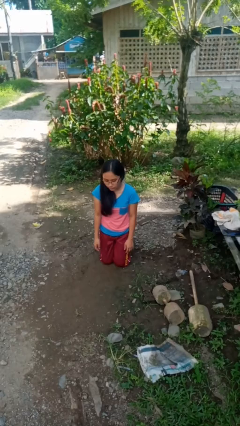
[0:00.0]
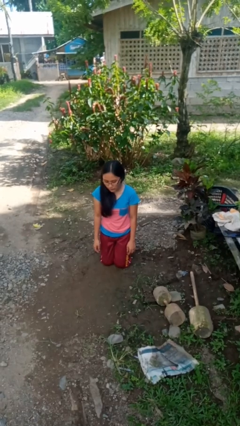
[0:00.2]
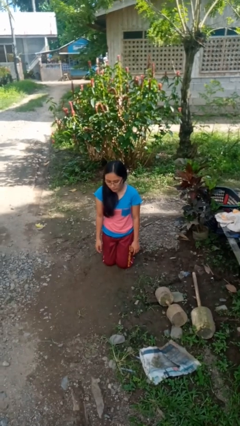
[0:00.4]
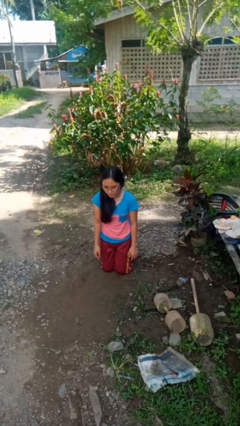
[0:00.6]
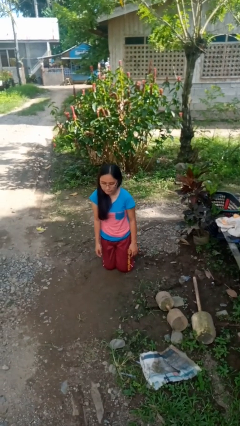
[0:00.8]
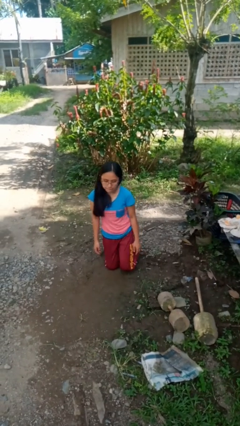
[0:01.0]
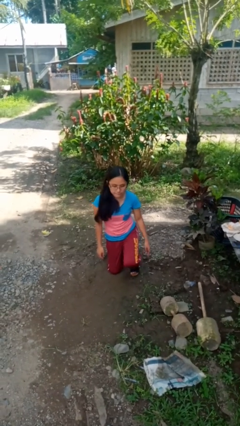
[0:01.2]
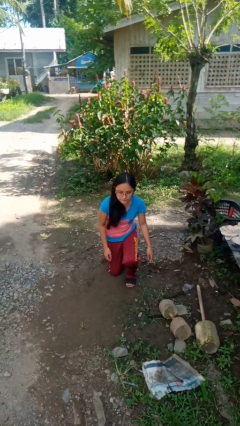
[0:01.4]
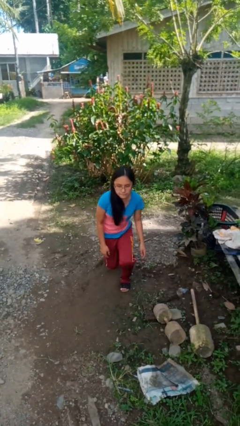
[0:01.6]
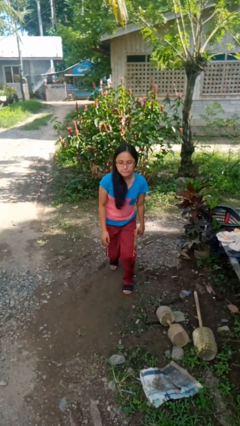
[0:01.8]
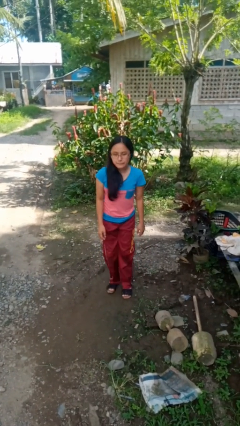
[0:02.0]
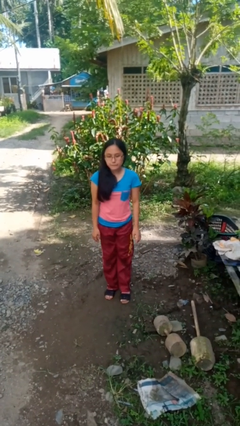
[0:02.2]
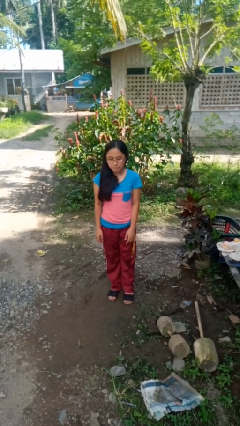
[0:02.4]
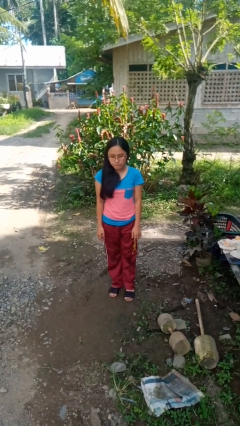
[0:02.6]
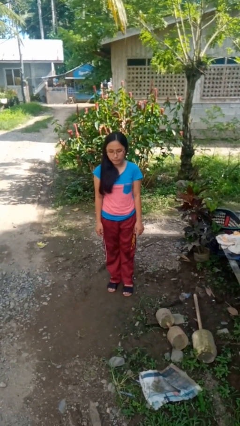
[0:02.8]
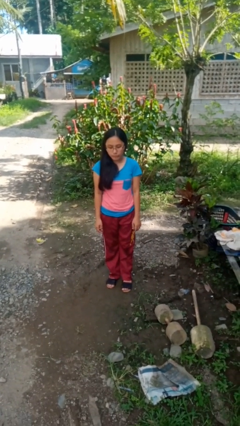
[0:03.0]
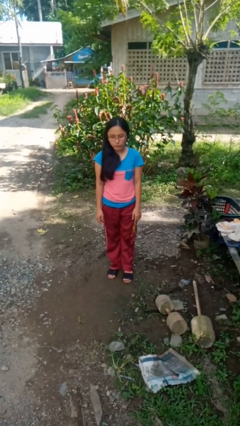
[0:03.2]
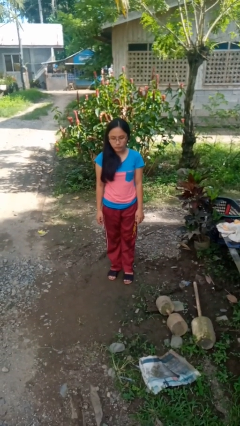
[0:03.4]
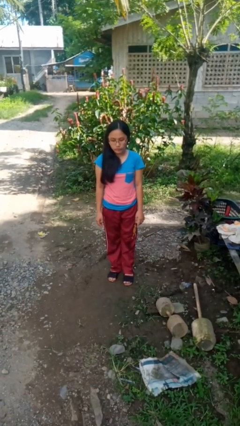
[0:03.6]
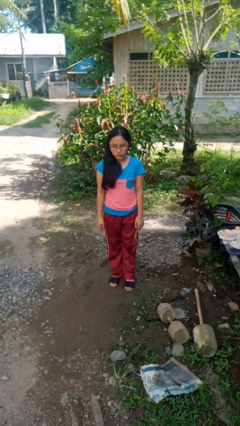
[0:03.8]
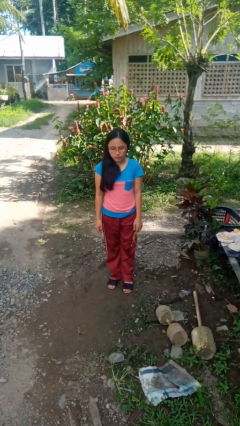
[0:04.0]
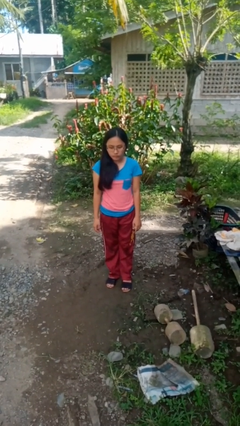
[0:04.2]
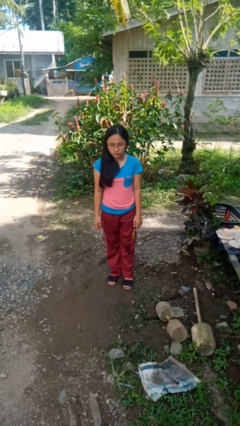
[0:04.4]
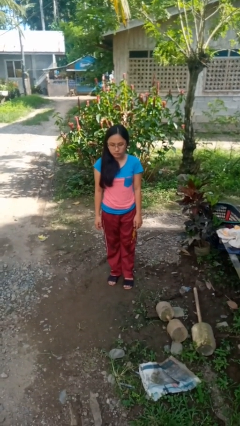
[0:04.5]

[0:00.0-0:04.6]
person stands up from floor

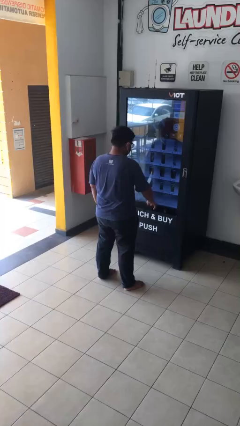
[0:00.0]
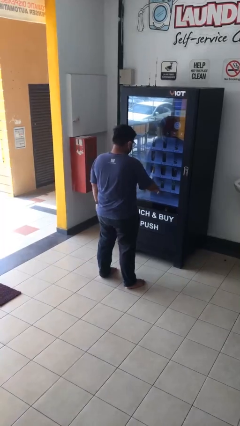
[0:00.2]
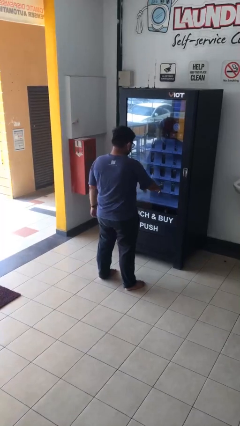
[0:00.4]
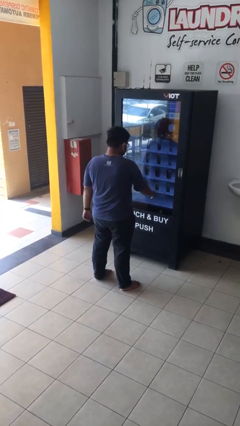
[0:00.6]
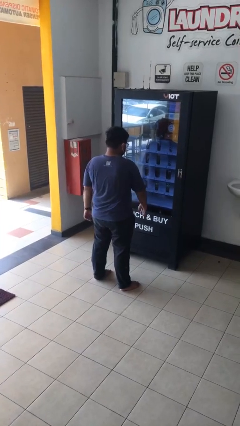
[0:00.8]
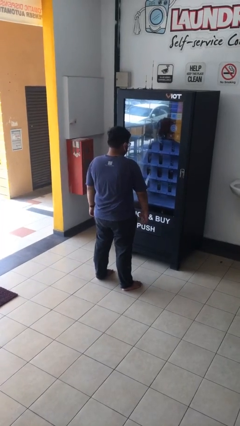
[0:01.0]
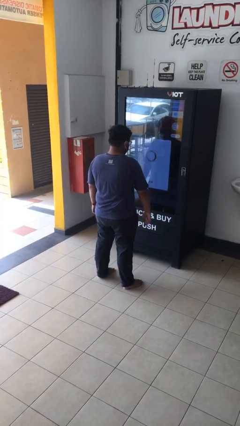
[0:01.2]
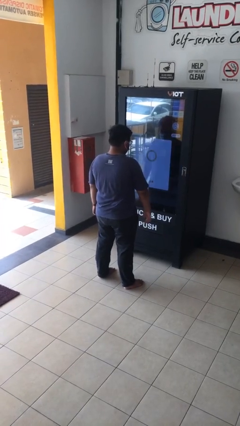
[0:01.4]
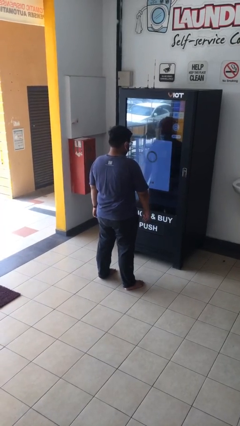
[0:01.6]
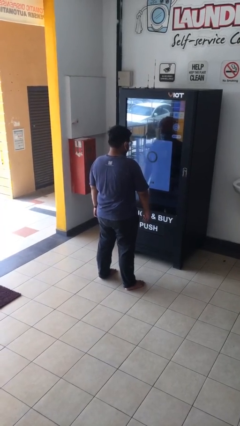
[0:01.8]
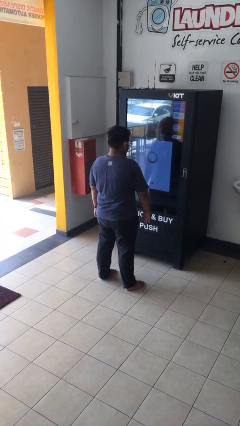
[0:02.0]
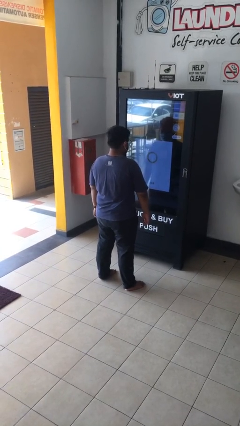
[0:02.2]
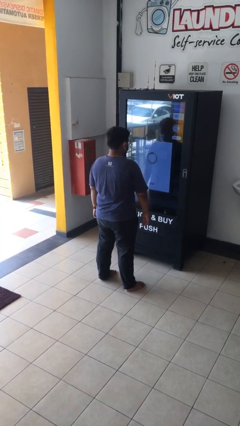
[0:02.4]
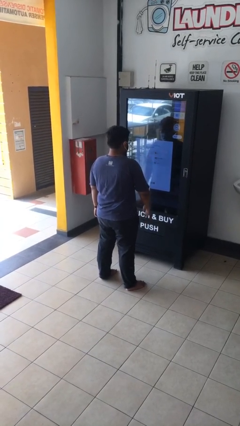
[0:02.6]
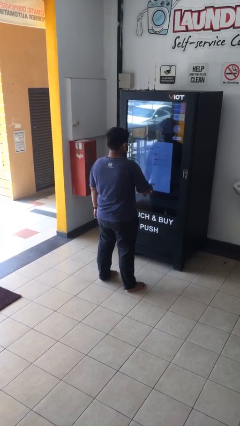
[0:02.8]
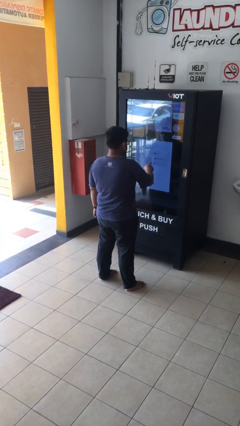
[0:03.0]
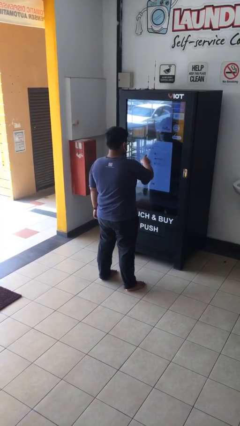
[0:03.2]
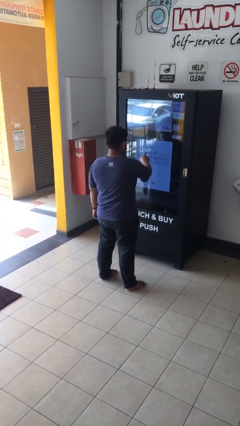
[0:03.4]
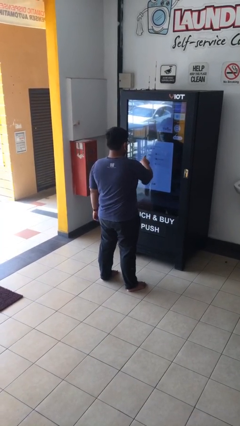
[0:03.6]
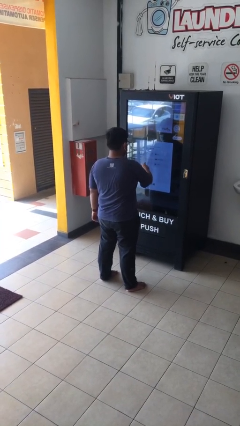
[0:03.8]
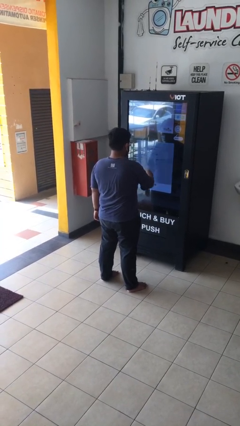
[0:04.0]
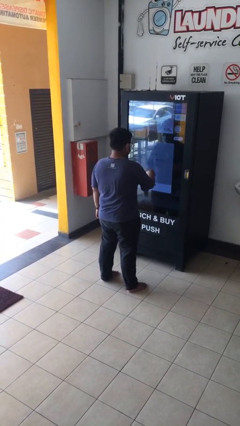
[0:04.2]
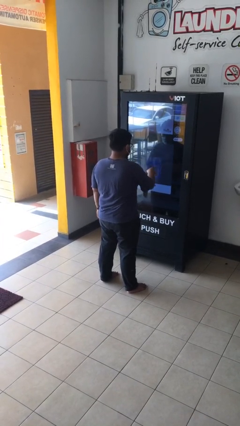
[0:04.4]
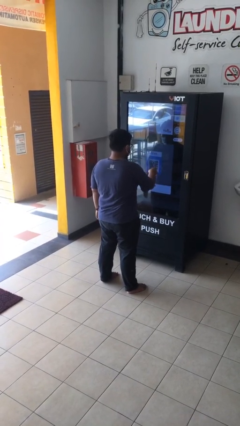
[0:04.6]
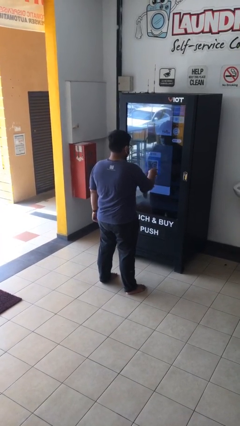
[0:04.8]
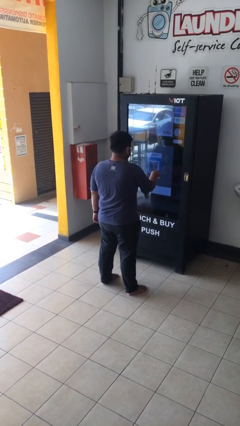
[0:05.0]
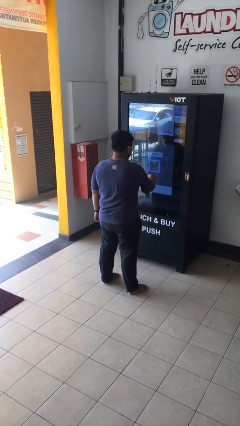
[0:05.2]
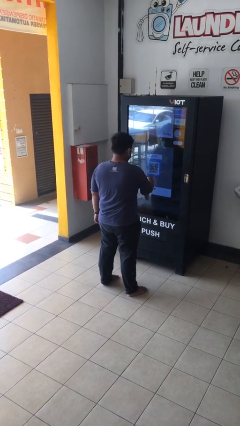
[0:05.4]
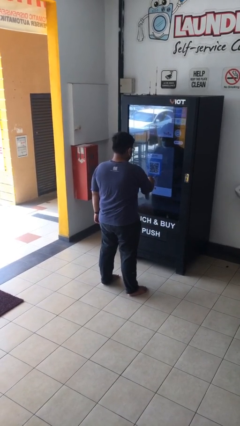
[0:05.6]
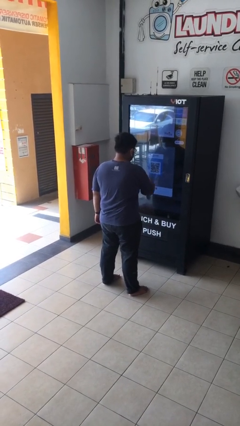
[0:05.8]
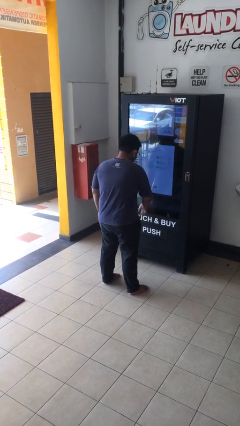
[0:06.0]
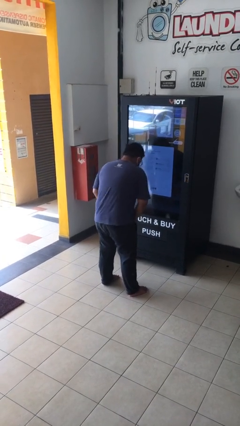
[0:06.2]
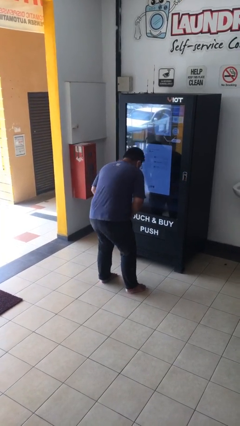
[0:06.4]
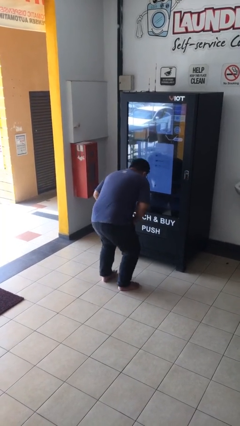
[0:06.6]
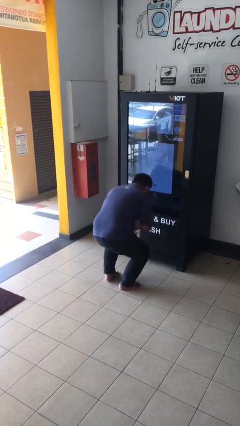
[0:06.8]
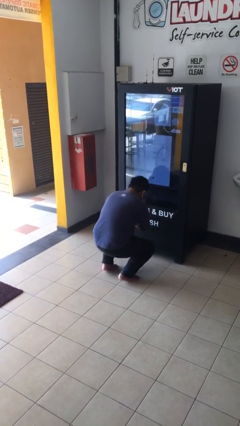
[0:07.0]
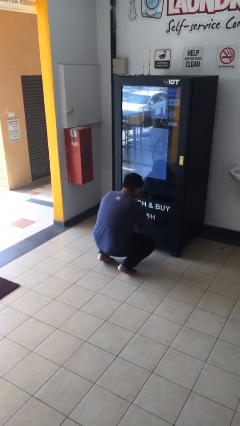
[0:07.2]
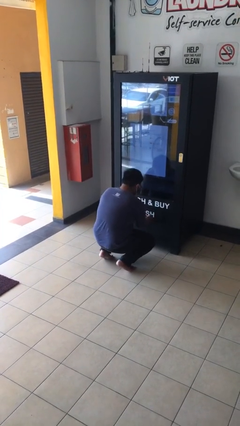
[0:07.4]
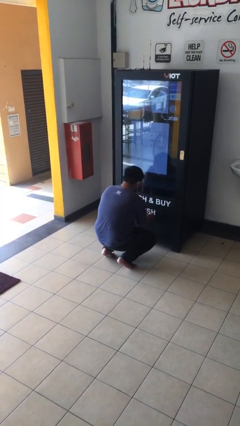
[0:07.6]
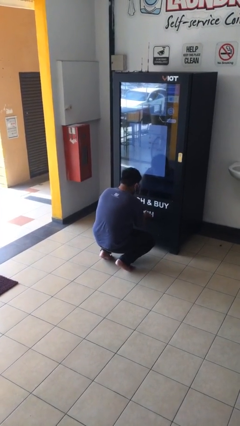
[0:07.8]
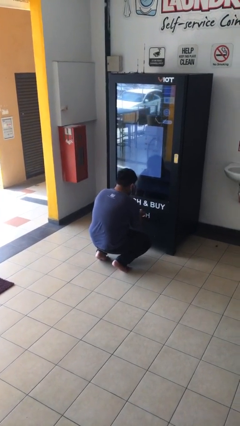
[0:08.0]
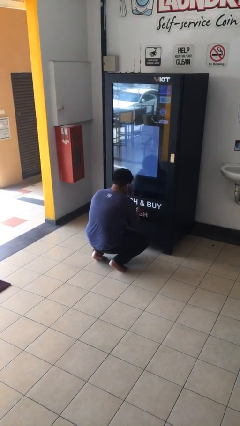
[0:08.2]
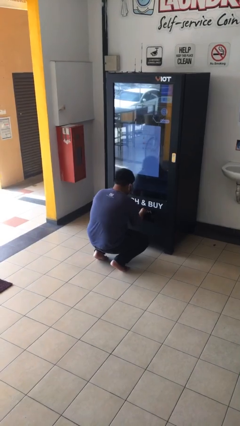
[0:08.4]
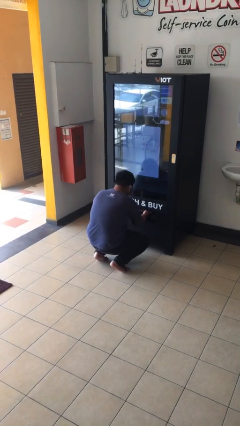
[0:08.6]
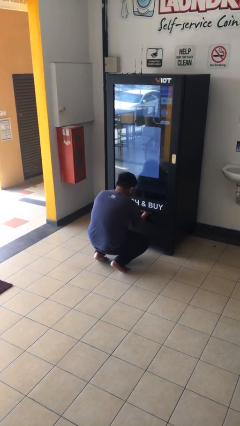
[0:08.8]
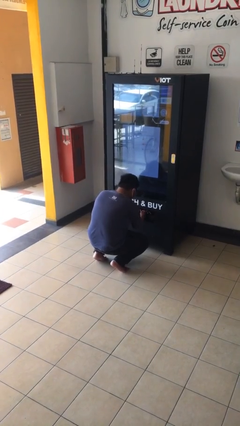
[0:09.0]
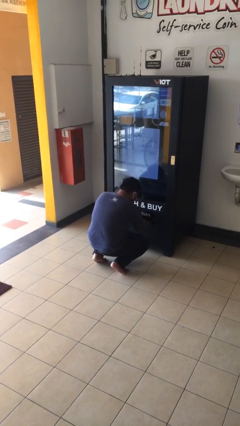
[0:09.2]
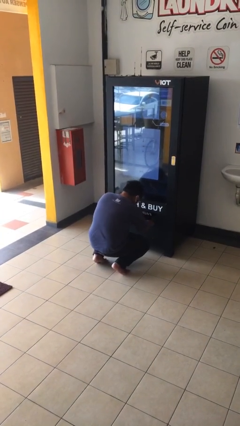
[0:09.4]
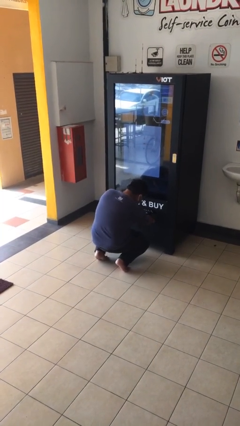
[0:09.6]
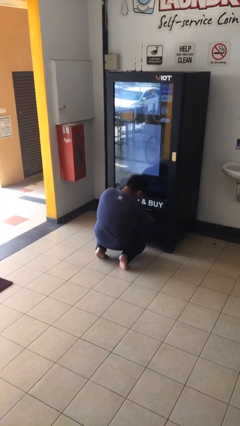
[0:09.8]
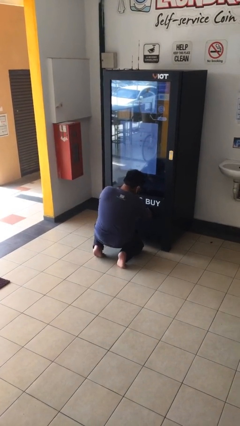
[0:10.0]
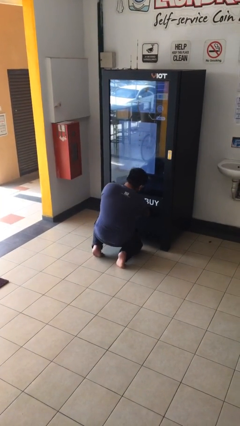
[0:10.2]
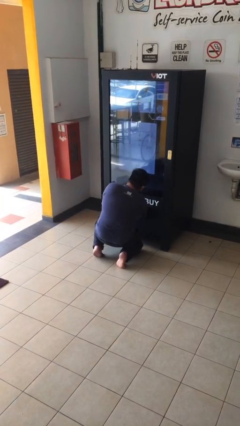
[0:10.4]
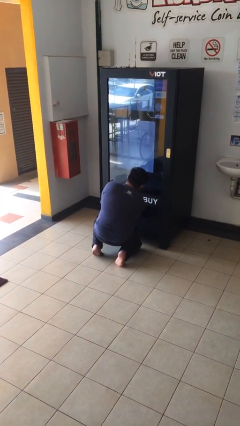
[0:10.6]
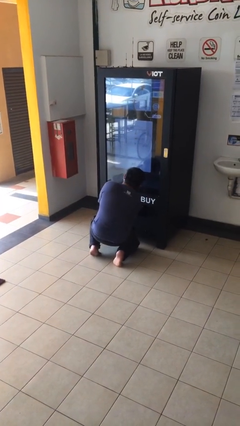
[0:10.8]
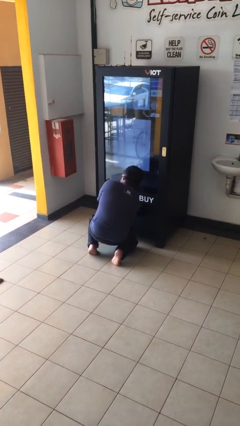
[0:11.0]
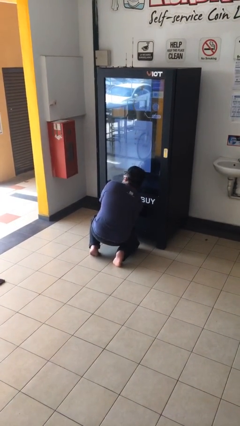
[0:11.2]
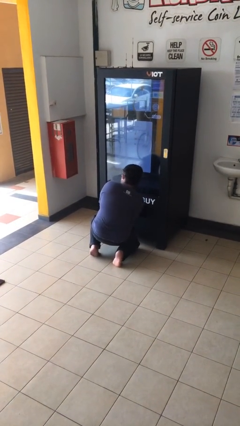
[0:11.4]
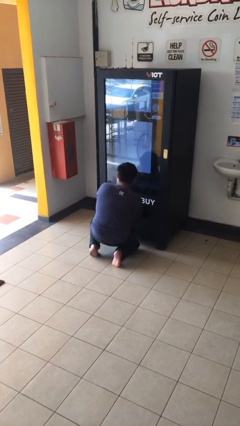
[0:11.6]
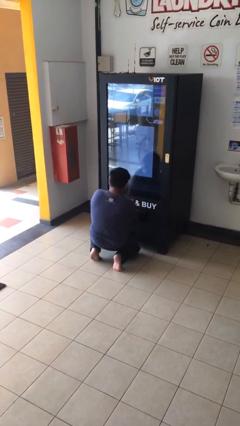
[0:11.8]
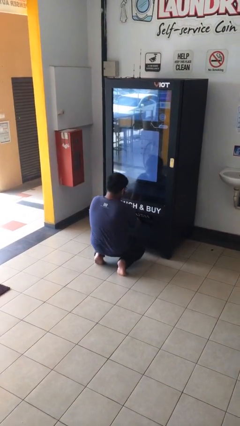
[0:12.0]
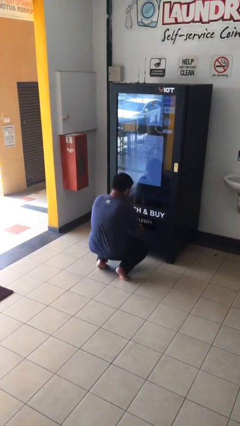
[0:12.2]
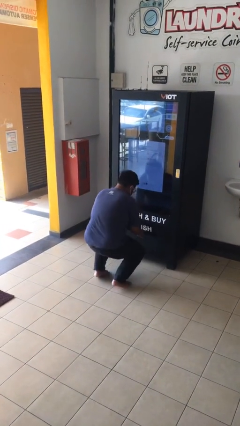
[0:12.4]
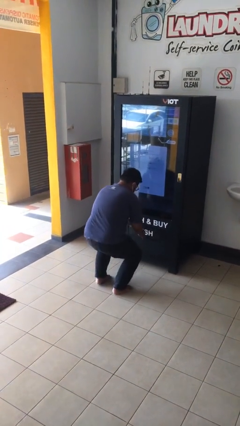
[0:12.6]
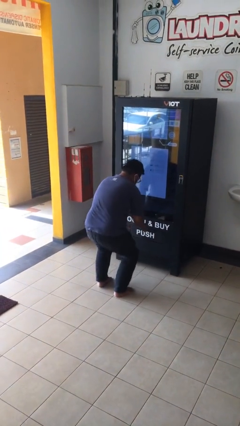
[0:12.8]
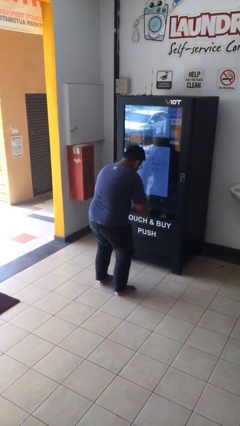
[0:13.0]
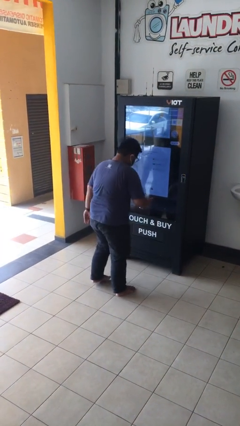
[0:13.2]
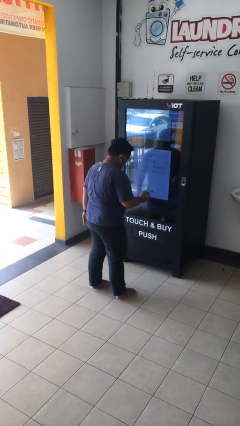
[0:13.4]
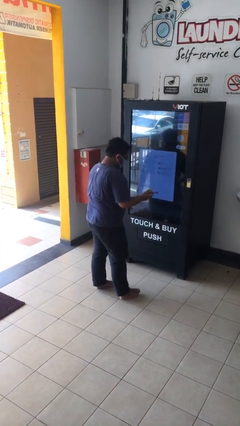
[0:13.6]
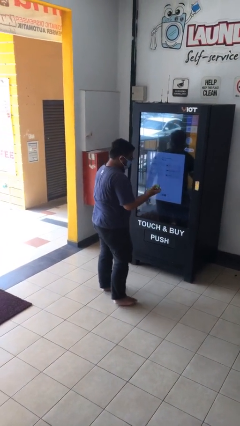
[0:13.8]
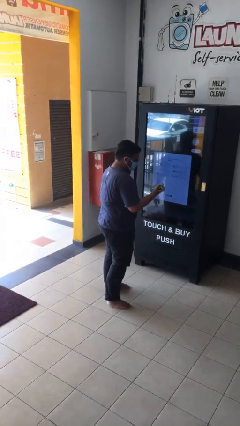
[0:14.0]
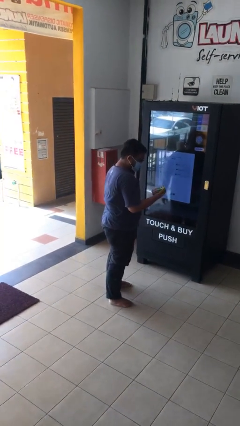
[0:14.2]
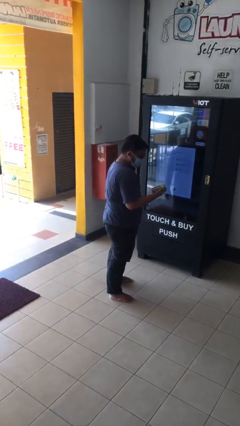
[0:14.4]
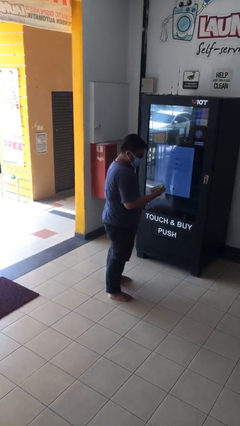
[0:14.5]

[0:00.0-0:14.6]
person purchases from machine
